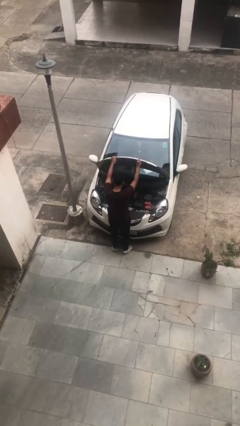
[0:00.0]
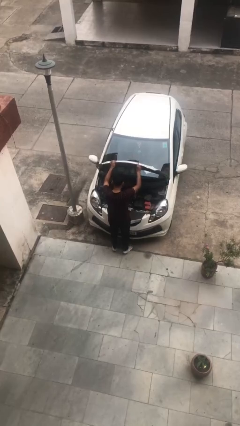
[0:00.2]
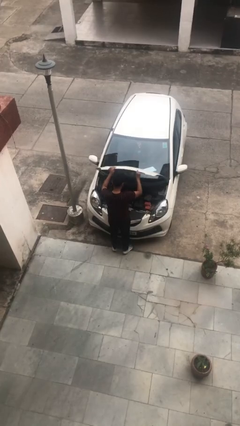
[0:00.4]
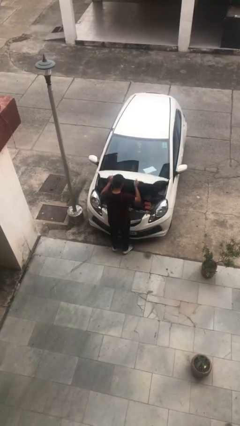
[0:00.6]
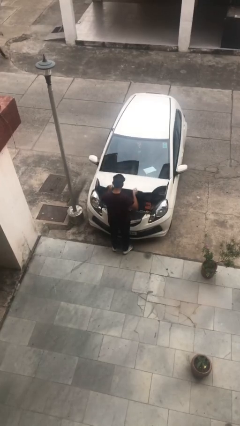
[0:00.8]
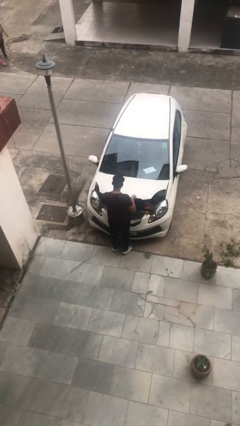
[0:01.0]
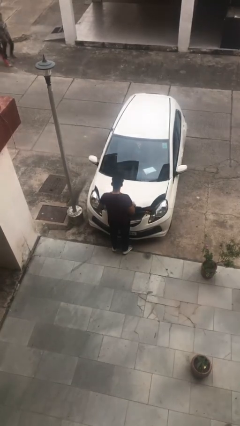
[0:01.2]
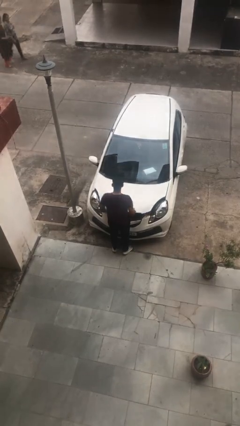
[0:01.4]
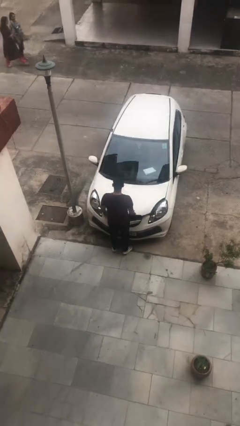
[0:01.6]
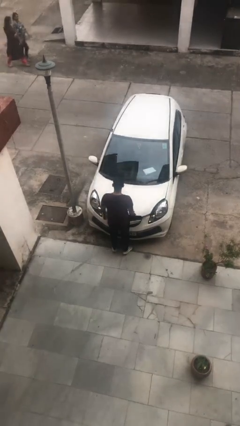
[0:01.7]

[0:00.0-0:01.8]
person closes car hood

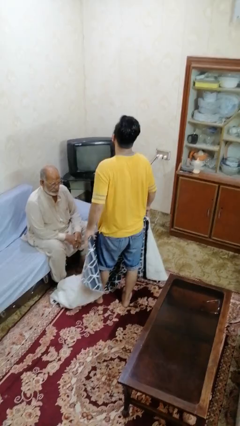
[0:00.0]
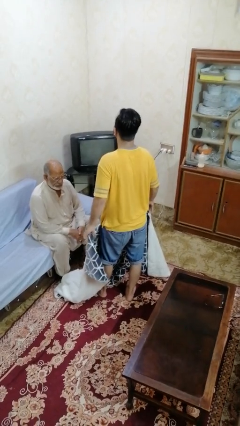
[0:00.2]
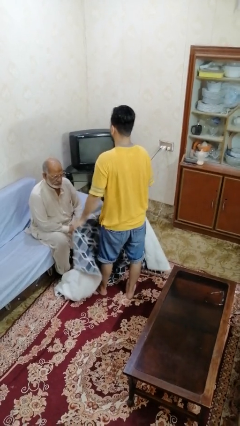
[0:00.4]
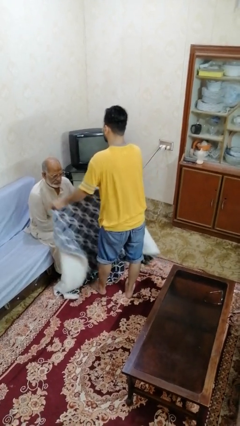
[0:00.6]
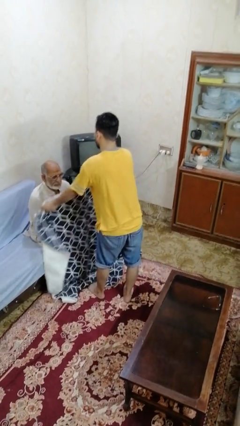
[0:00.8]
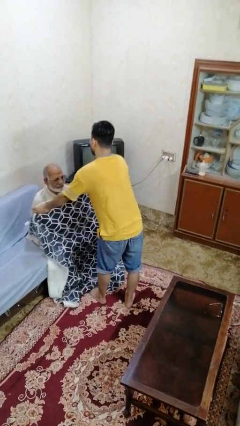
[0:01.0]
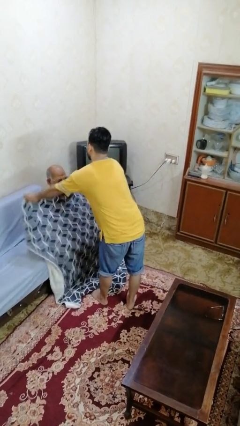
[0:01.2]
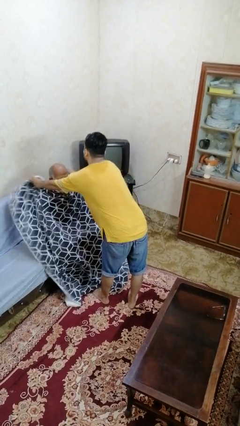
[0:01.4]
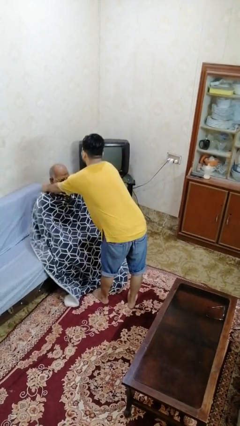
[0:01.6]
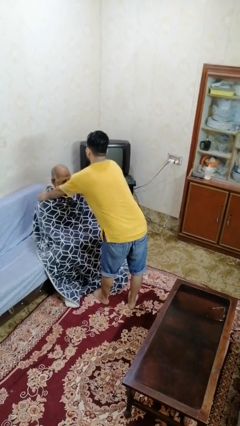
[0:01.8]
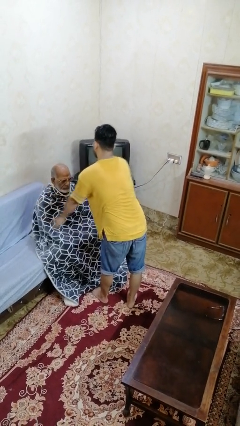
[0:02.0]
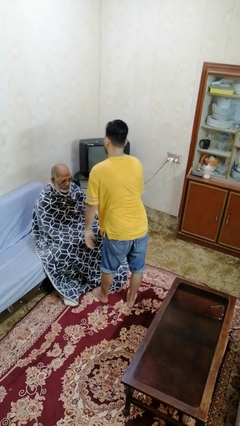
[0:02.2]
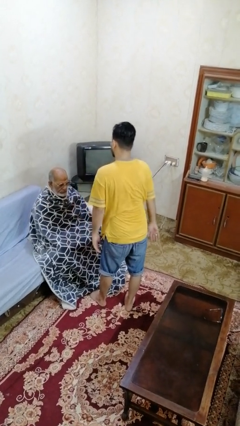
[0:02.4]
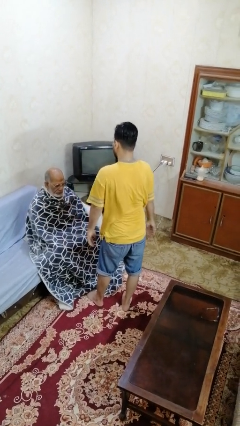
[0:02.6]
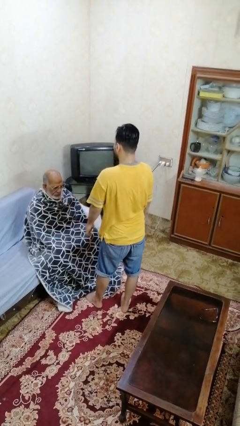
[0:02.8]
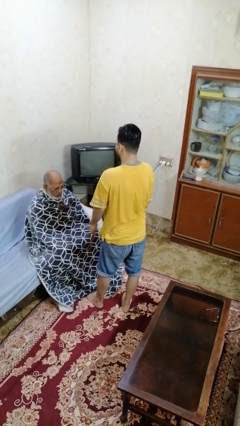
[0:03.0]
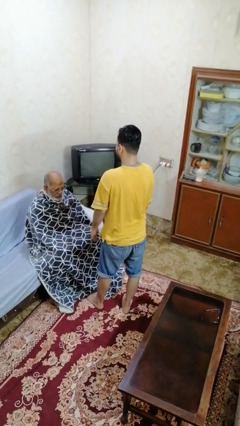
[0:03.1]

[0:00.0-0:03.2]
person covers friend with blanket

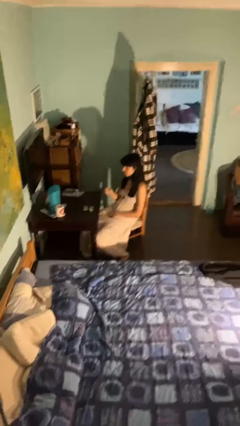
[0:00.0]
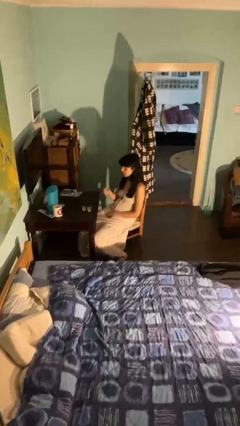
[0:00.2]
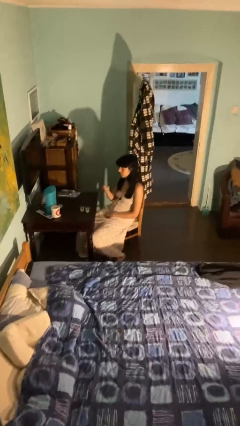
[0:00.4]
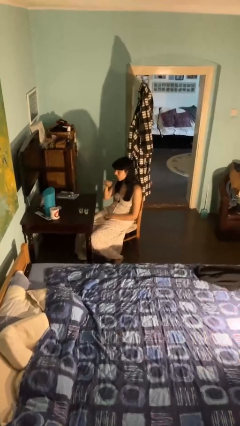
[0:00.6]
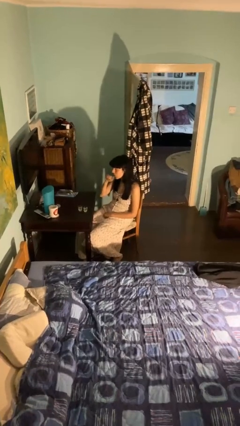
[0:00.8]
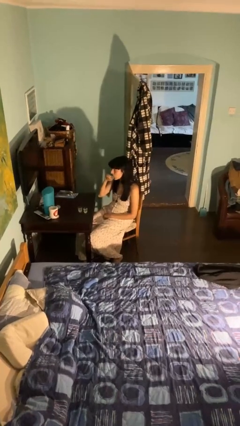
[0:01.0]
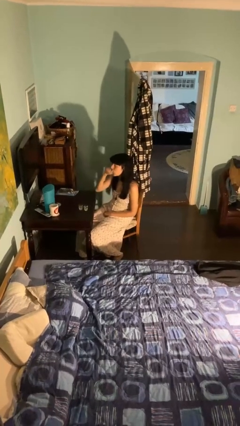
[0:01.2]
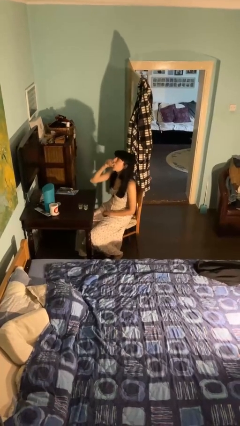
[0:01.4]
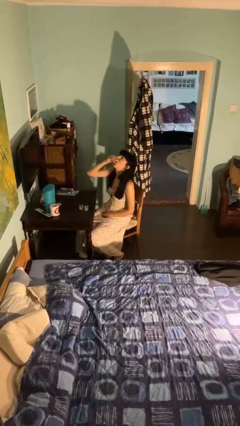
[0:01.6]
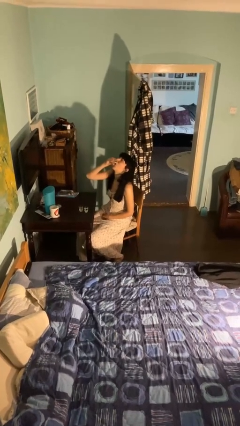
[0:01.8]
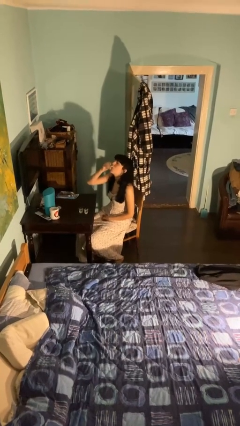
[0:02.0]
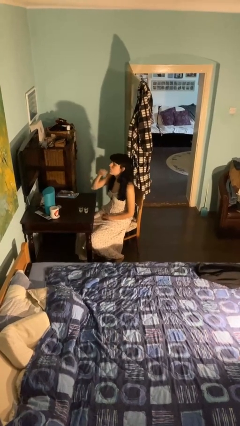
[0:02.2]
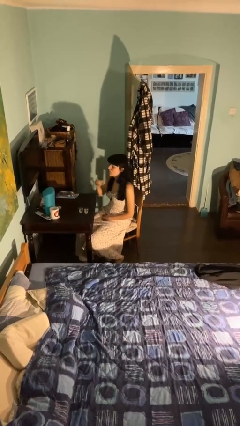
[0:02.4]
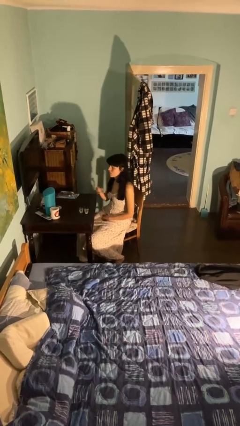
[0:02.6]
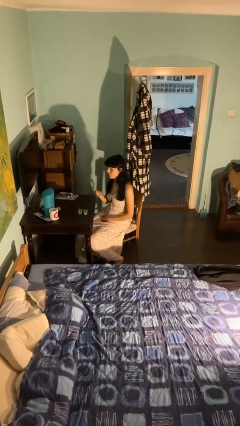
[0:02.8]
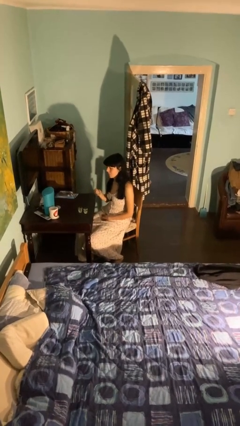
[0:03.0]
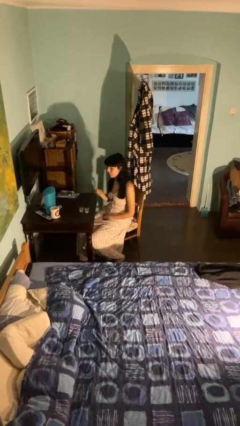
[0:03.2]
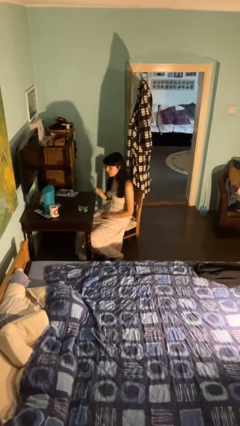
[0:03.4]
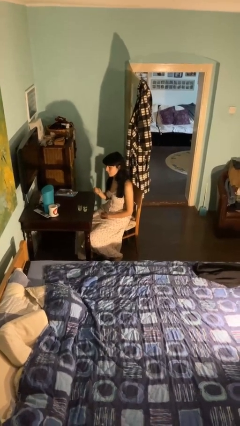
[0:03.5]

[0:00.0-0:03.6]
person drinks from shotglass

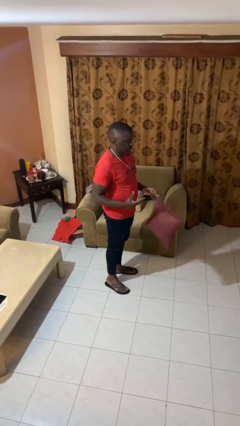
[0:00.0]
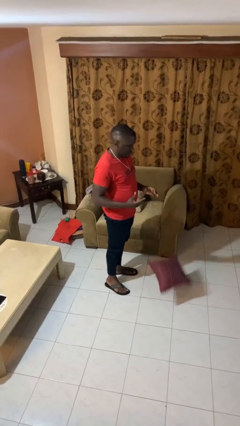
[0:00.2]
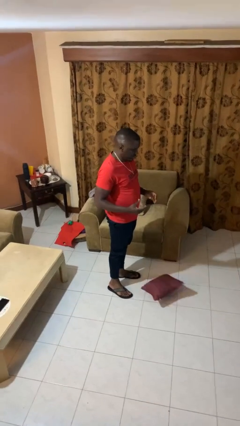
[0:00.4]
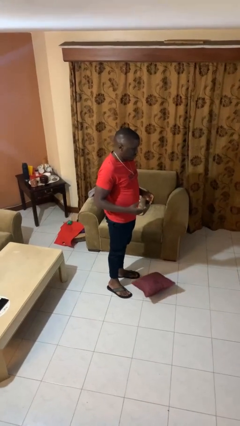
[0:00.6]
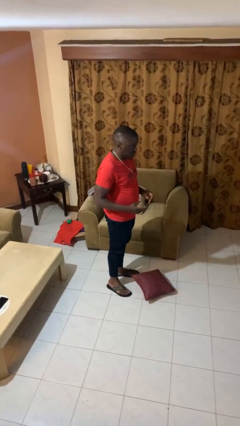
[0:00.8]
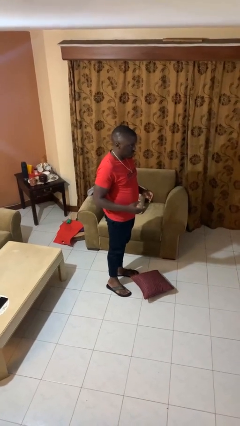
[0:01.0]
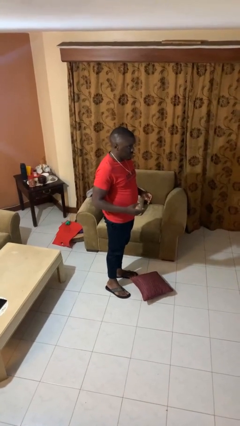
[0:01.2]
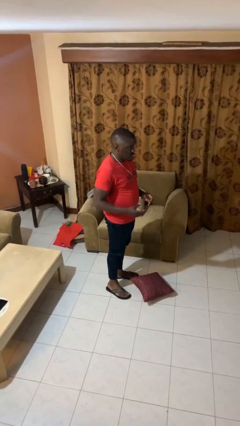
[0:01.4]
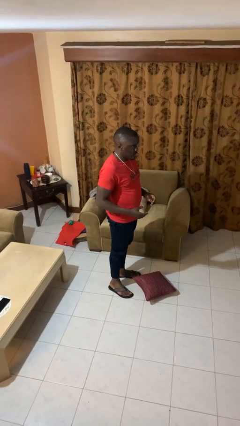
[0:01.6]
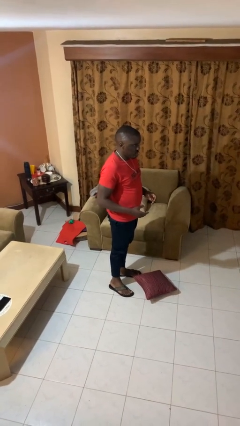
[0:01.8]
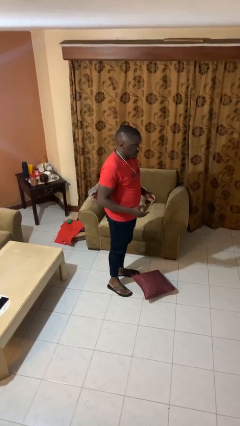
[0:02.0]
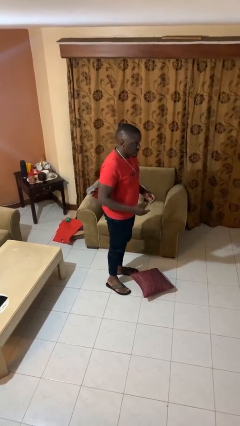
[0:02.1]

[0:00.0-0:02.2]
person drops object

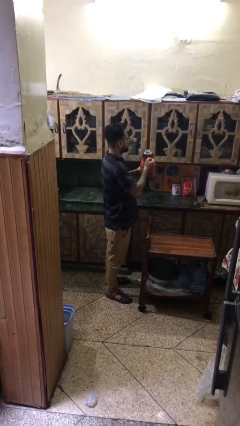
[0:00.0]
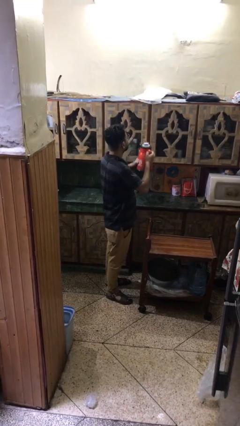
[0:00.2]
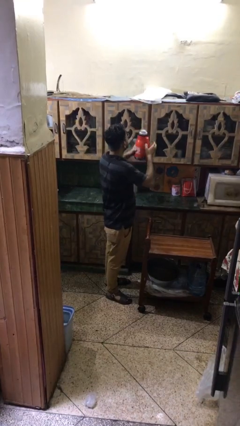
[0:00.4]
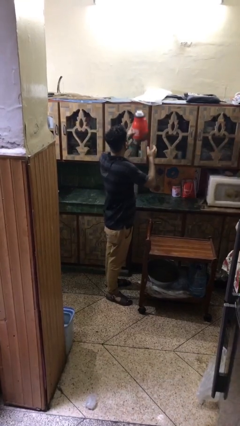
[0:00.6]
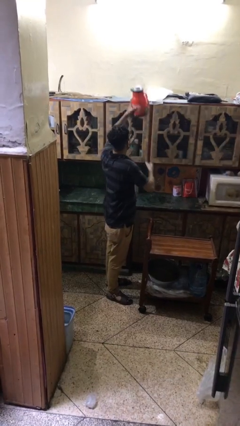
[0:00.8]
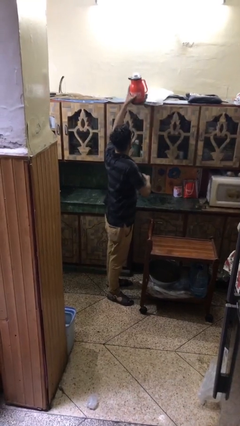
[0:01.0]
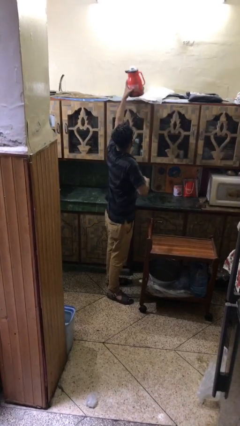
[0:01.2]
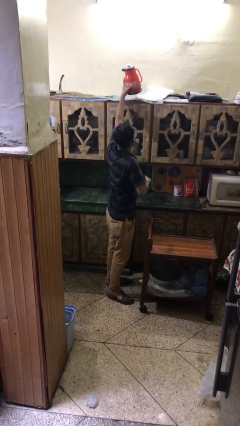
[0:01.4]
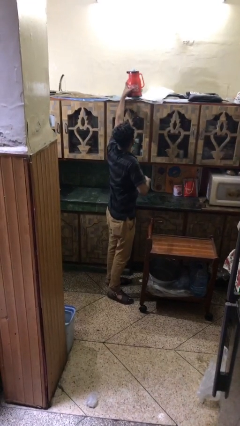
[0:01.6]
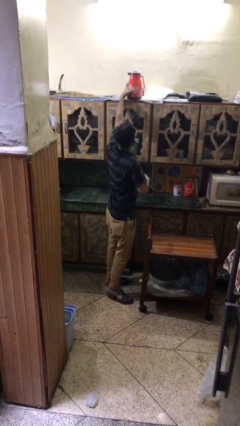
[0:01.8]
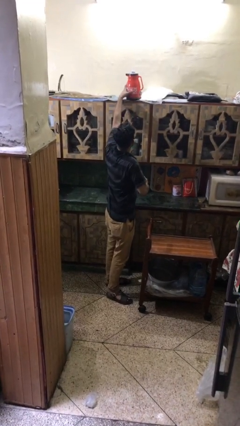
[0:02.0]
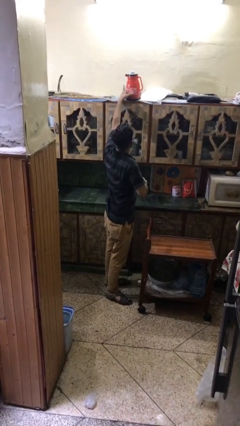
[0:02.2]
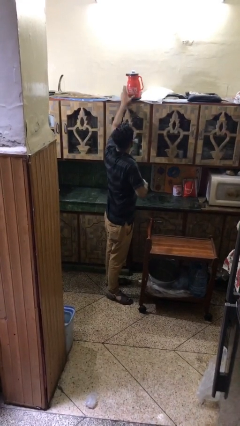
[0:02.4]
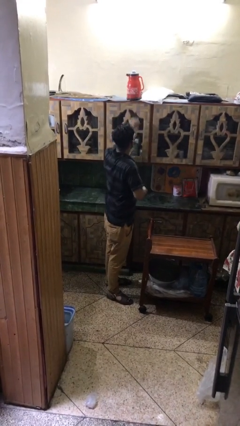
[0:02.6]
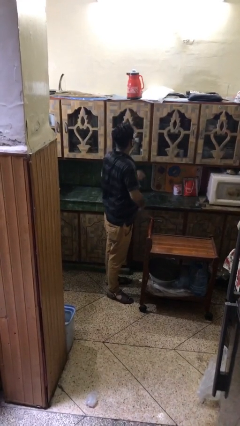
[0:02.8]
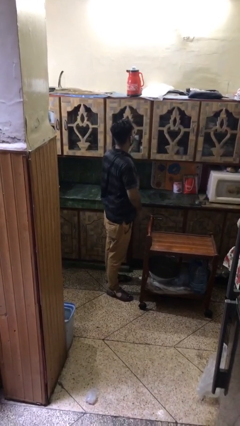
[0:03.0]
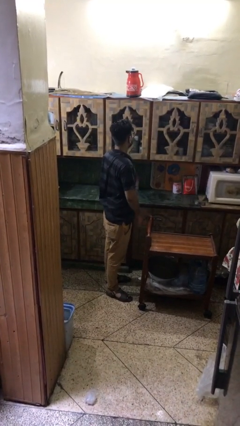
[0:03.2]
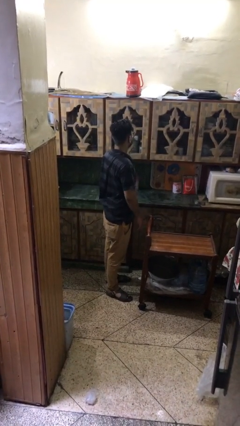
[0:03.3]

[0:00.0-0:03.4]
person puts down object on shelf

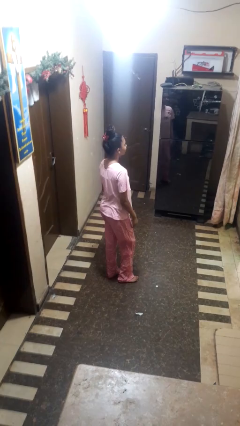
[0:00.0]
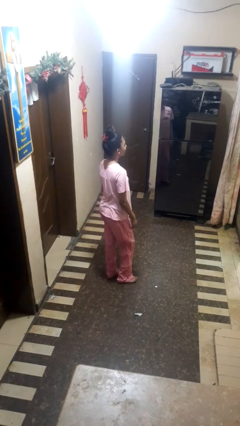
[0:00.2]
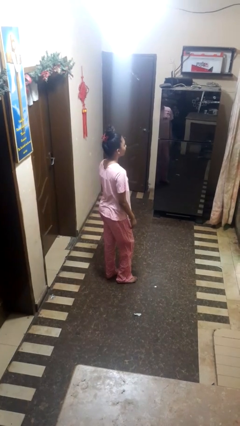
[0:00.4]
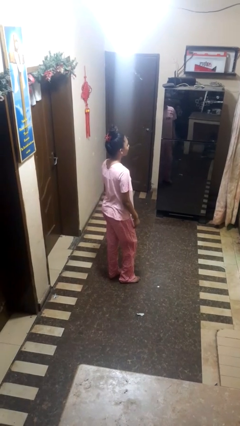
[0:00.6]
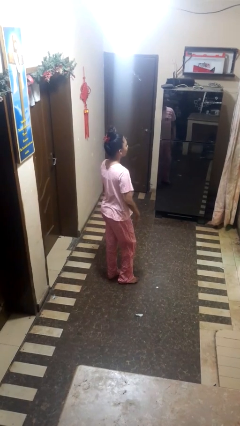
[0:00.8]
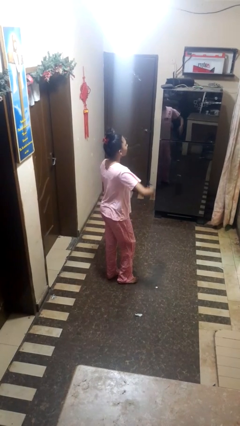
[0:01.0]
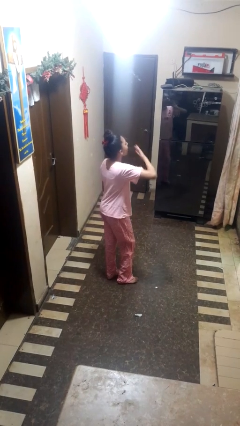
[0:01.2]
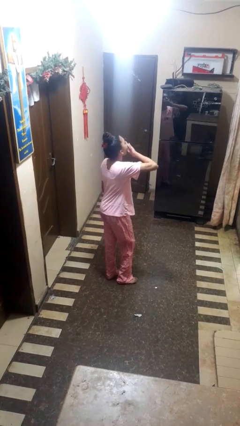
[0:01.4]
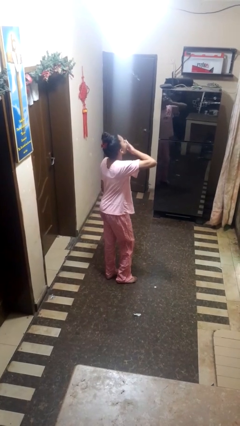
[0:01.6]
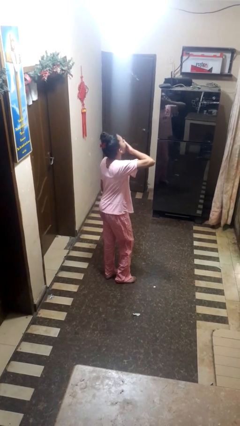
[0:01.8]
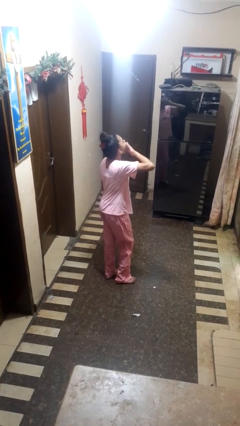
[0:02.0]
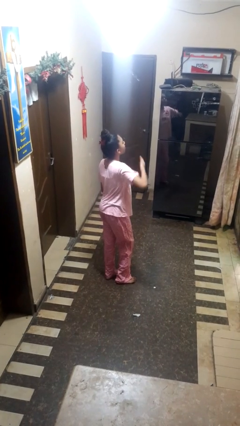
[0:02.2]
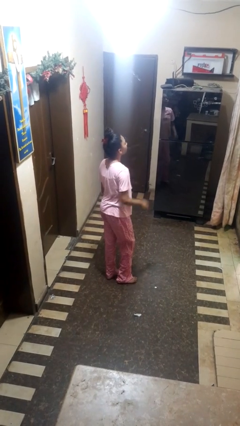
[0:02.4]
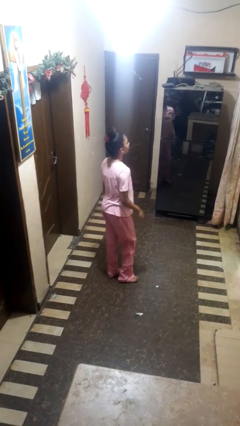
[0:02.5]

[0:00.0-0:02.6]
person yawns

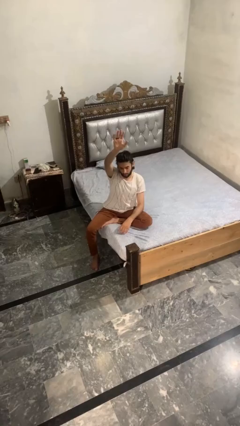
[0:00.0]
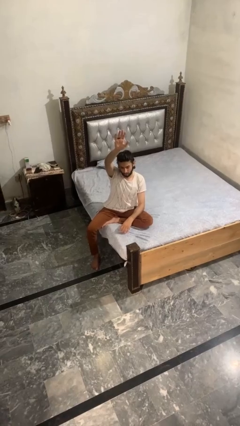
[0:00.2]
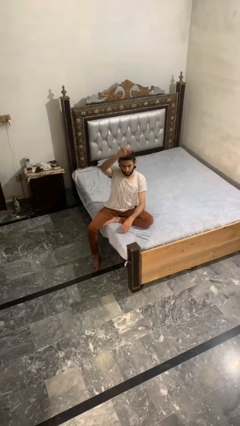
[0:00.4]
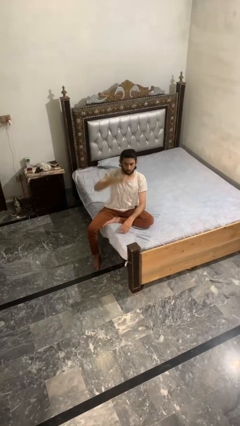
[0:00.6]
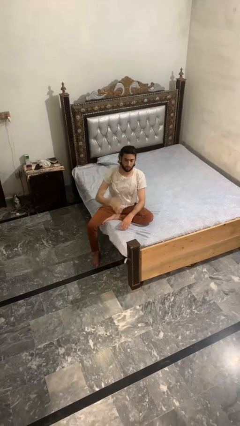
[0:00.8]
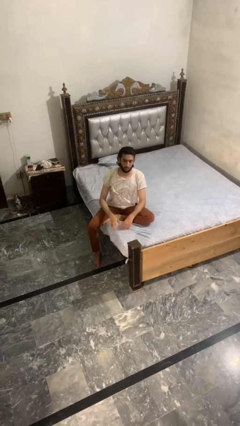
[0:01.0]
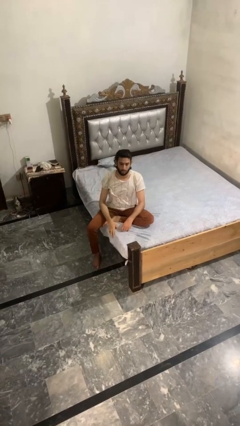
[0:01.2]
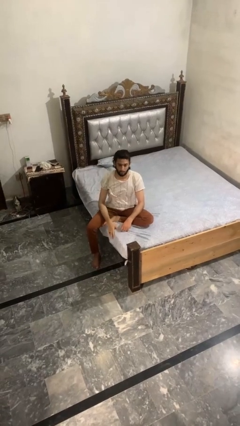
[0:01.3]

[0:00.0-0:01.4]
person gestures lower hand
